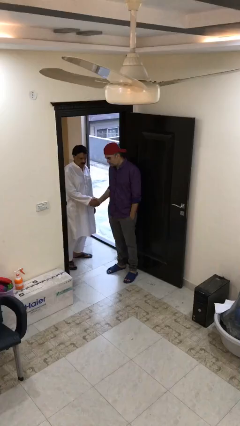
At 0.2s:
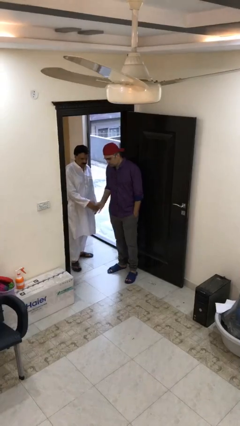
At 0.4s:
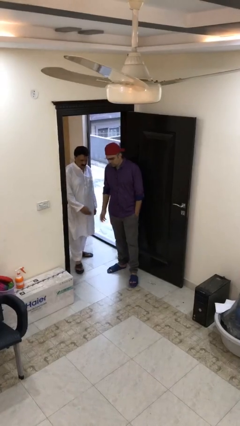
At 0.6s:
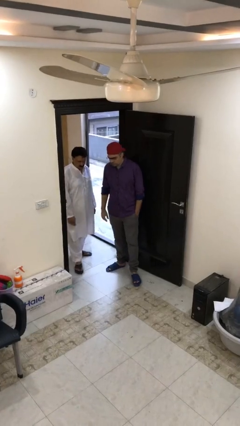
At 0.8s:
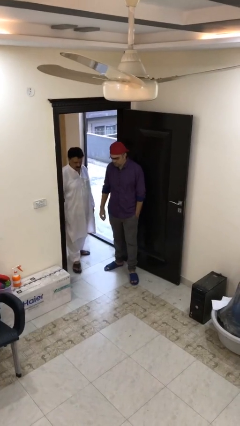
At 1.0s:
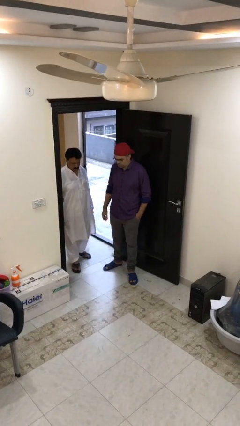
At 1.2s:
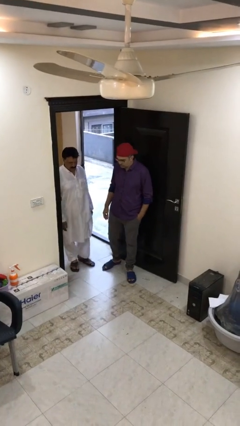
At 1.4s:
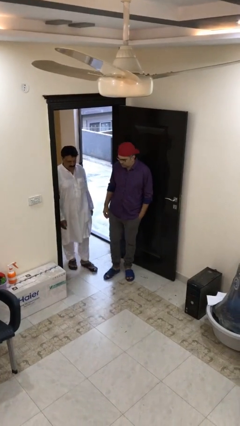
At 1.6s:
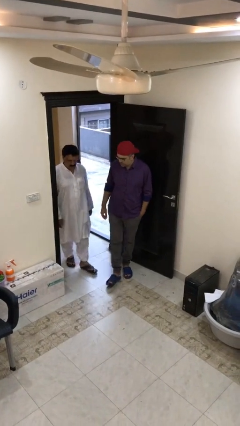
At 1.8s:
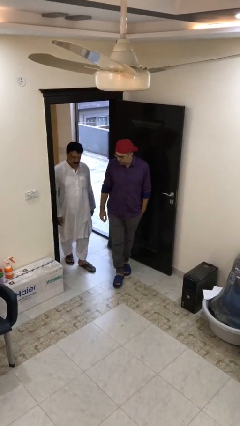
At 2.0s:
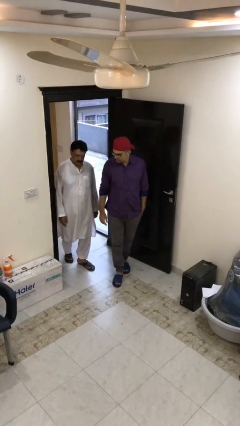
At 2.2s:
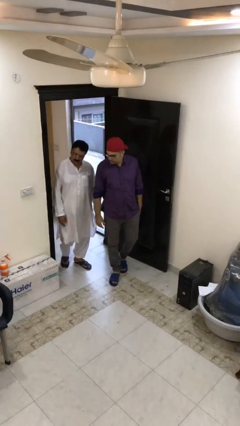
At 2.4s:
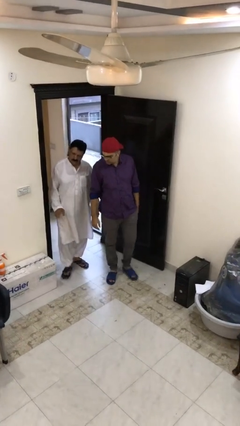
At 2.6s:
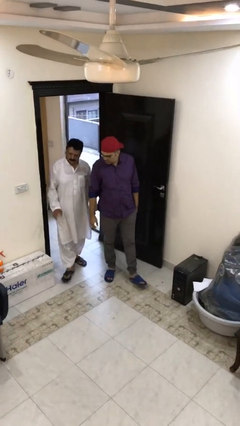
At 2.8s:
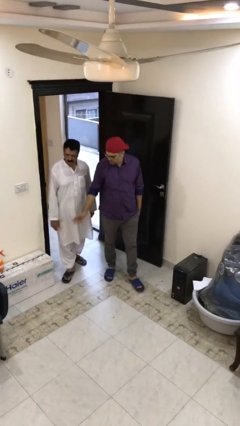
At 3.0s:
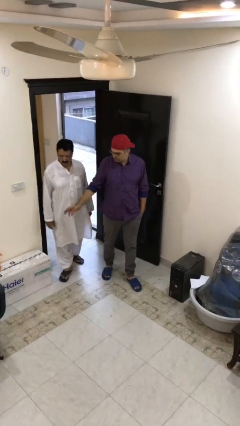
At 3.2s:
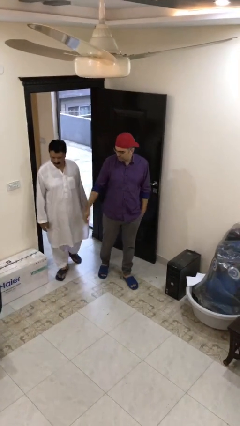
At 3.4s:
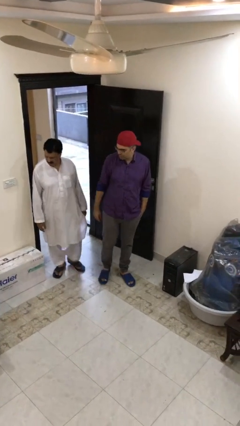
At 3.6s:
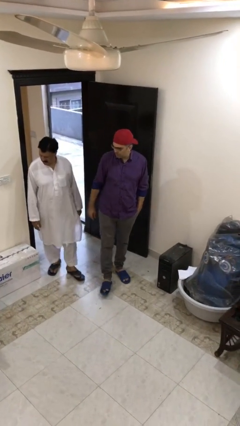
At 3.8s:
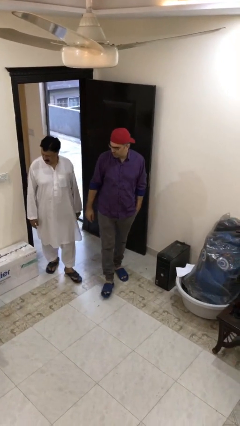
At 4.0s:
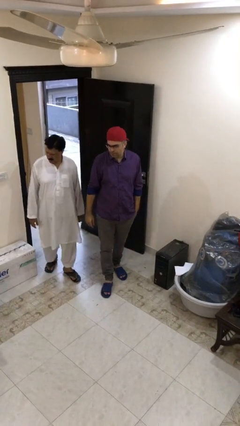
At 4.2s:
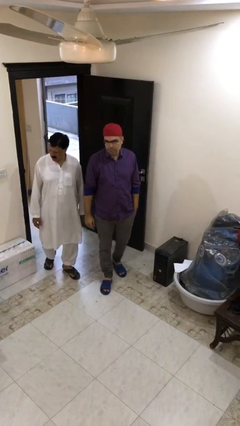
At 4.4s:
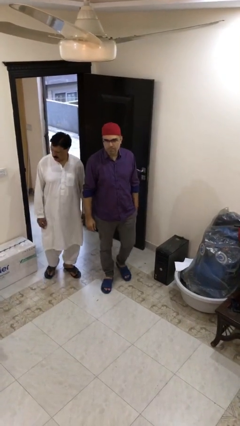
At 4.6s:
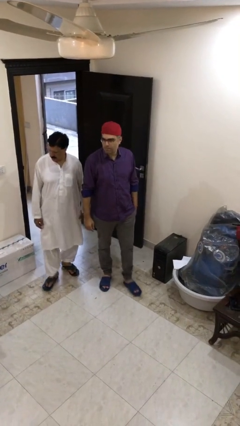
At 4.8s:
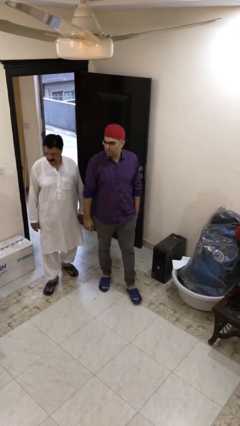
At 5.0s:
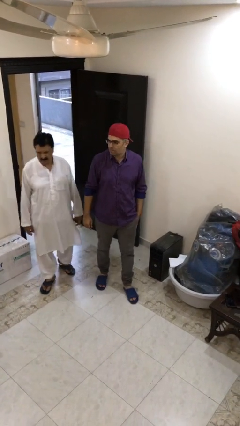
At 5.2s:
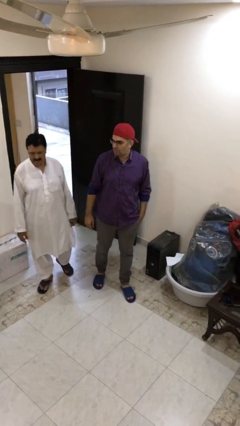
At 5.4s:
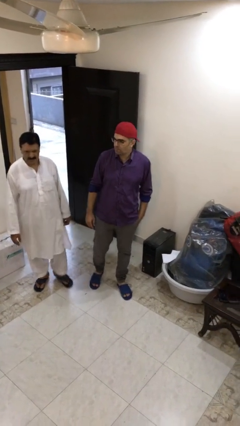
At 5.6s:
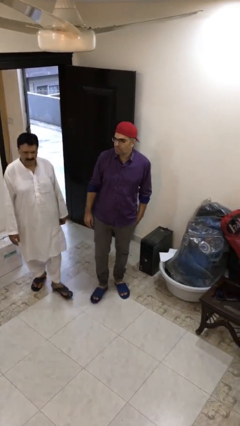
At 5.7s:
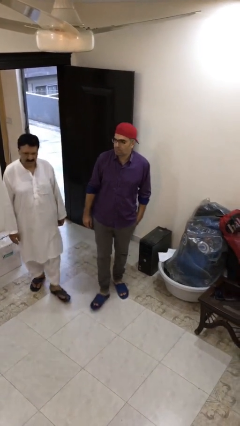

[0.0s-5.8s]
person talks to person

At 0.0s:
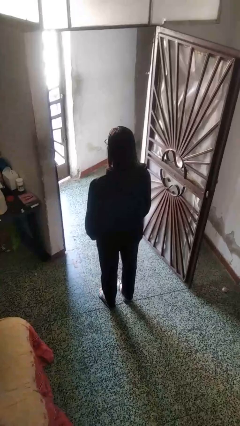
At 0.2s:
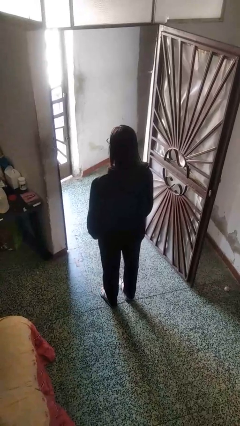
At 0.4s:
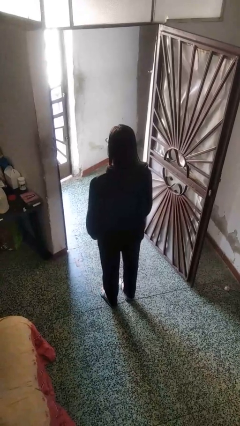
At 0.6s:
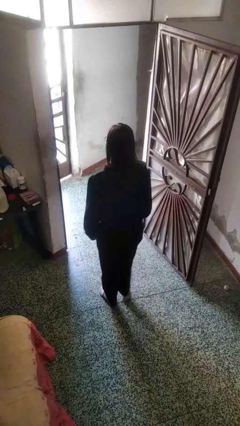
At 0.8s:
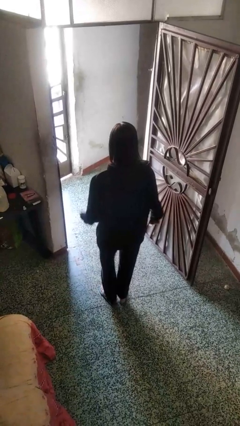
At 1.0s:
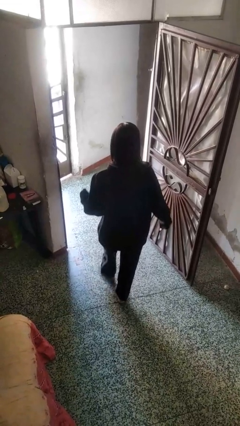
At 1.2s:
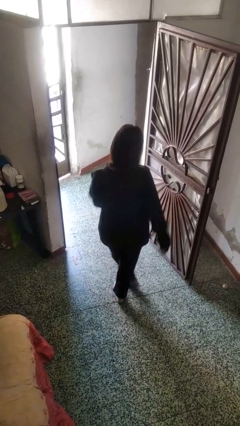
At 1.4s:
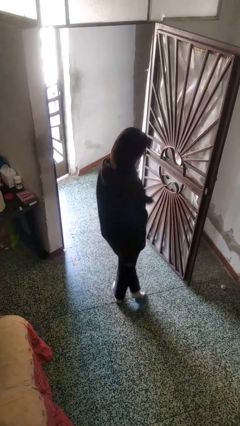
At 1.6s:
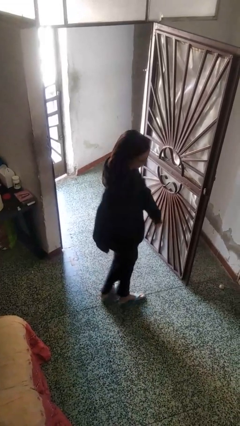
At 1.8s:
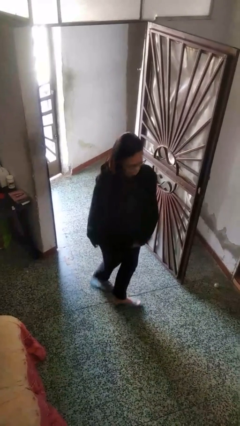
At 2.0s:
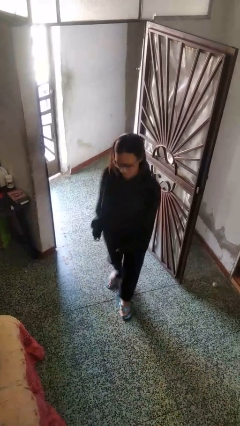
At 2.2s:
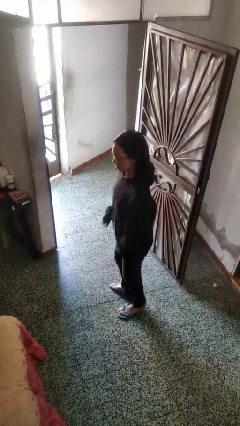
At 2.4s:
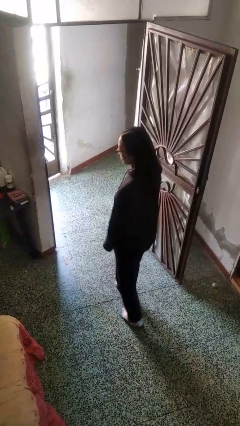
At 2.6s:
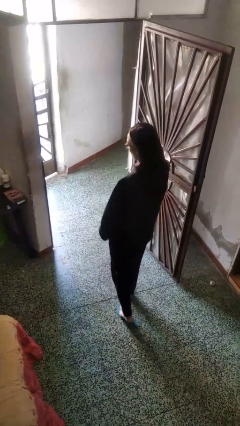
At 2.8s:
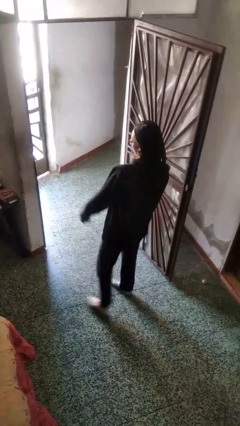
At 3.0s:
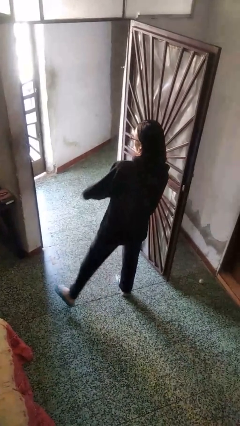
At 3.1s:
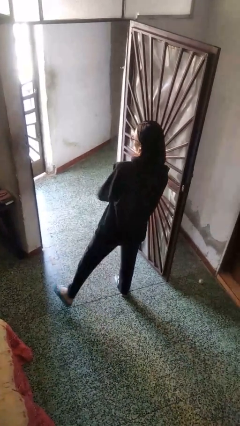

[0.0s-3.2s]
person twirls

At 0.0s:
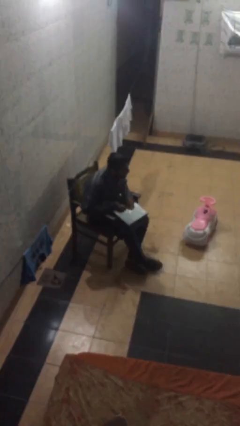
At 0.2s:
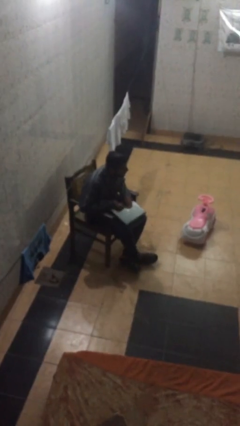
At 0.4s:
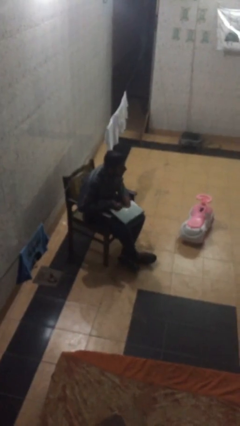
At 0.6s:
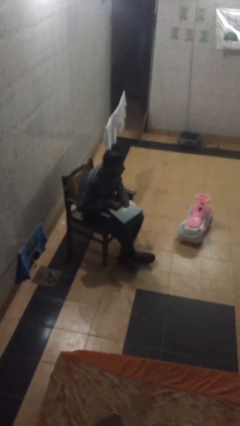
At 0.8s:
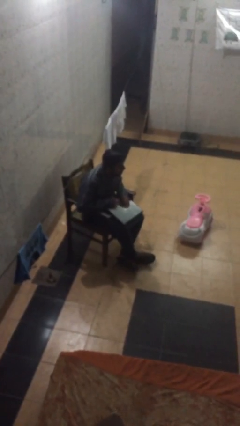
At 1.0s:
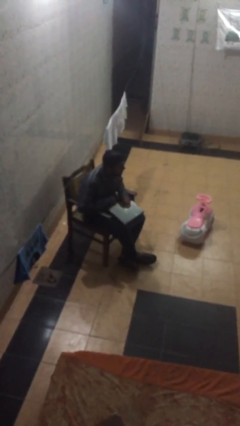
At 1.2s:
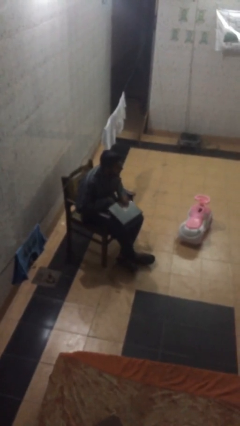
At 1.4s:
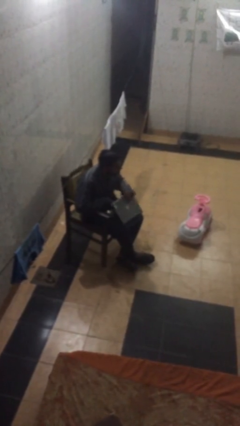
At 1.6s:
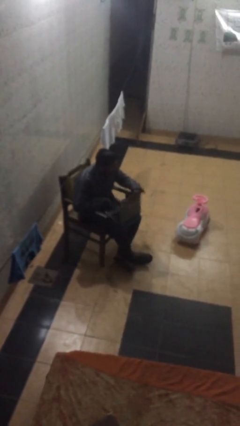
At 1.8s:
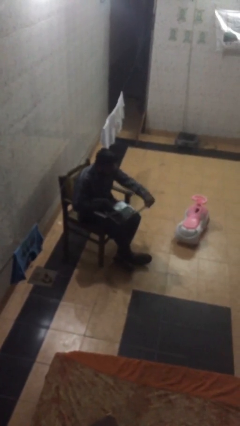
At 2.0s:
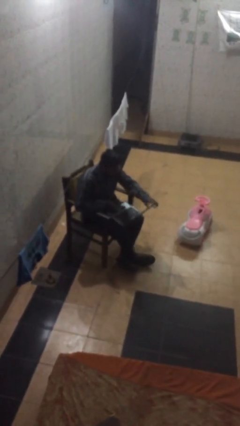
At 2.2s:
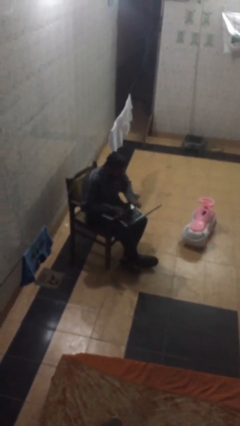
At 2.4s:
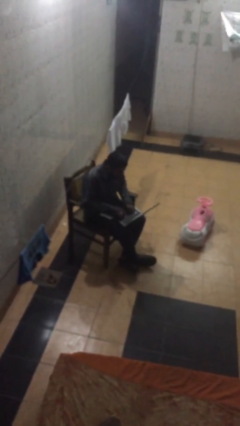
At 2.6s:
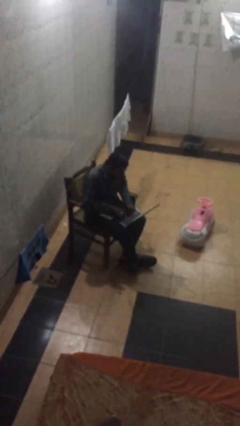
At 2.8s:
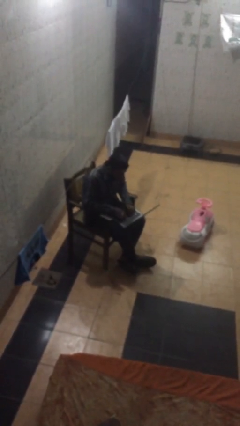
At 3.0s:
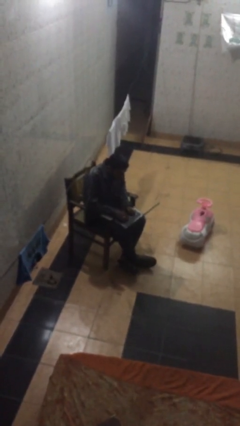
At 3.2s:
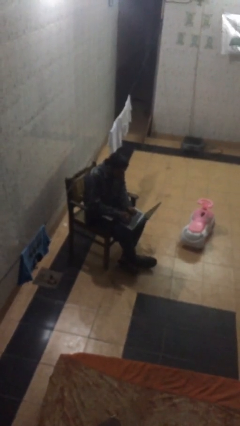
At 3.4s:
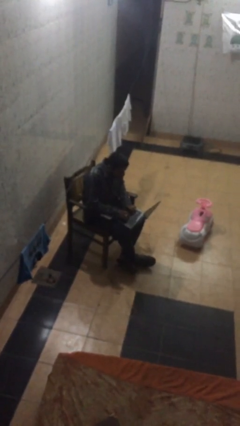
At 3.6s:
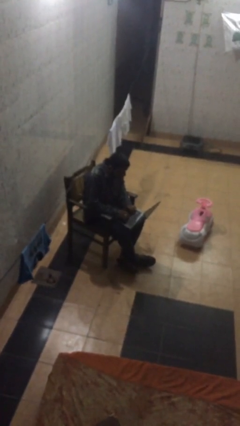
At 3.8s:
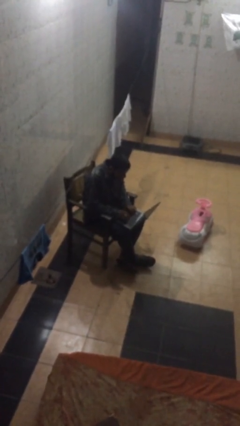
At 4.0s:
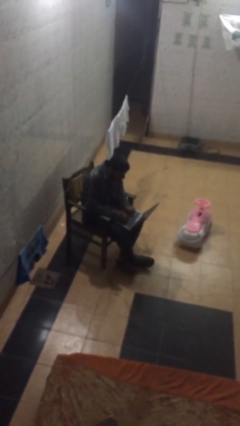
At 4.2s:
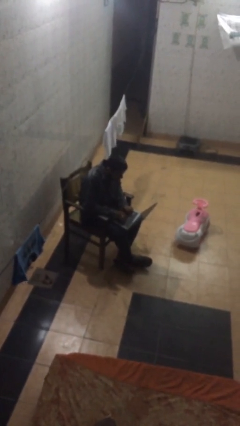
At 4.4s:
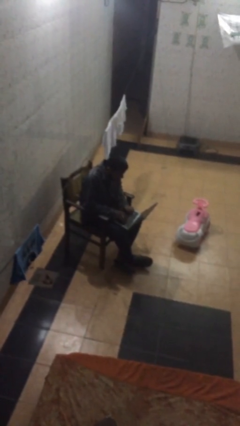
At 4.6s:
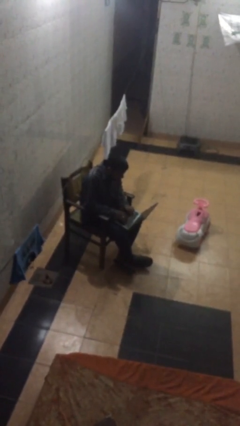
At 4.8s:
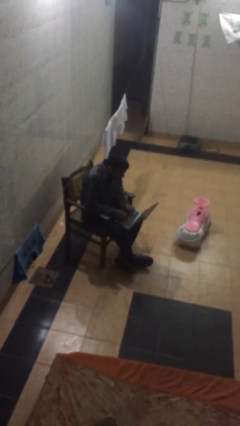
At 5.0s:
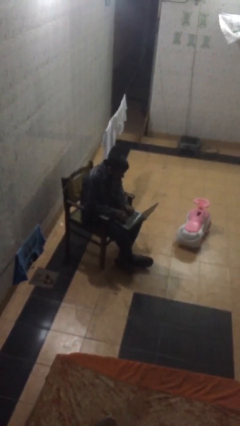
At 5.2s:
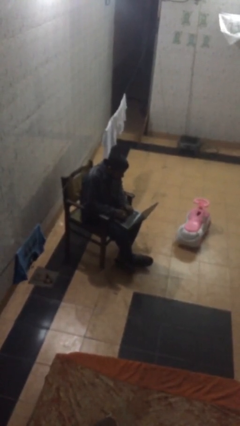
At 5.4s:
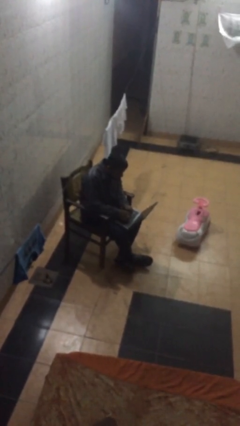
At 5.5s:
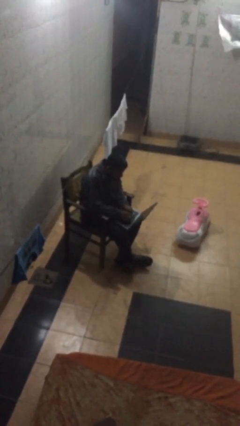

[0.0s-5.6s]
person interacts with laptop

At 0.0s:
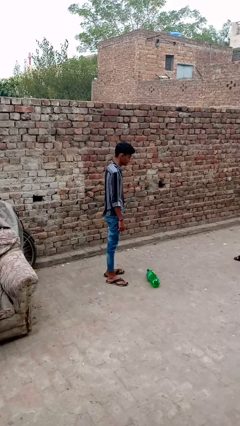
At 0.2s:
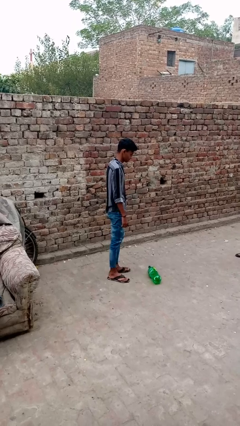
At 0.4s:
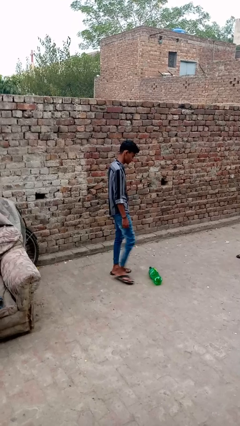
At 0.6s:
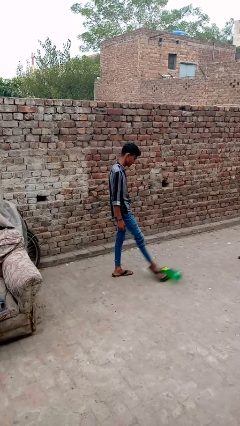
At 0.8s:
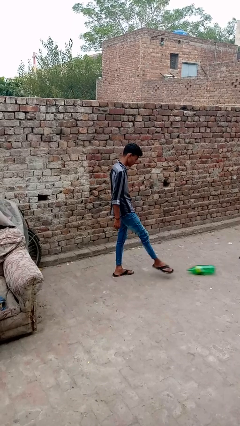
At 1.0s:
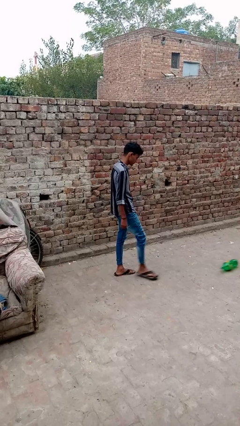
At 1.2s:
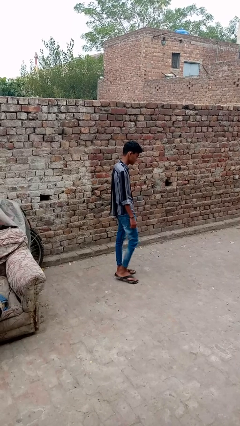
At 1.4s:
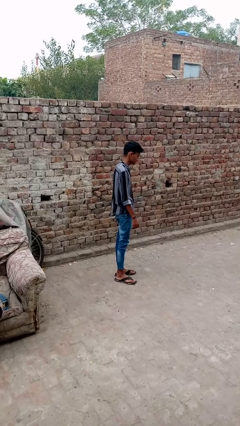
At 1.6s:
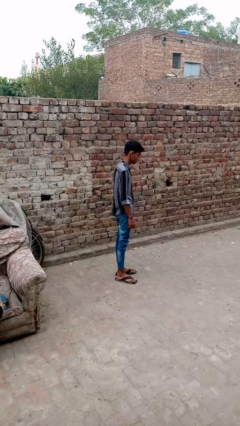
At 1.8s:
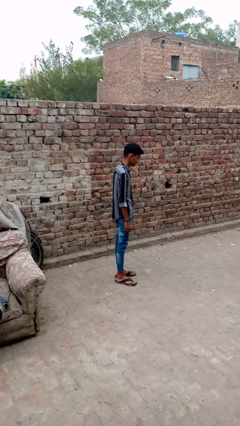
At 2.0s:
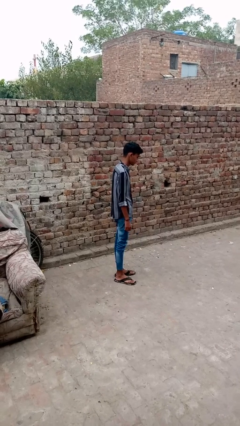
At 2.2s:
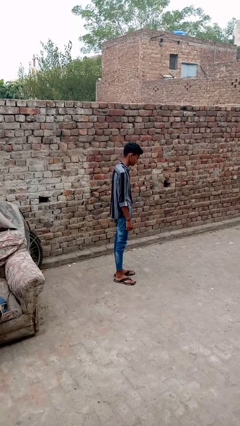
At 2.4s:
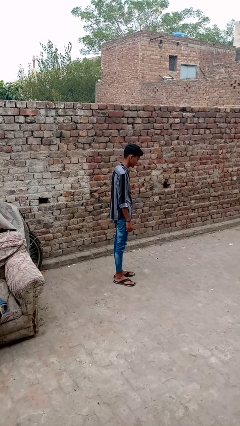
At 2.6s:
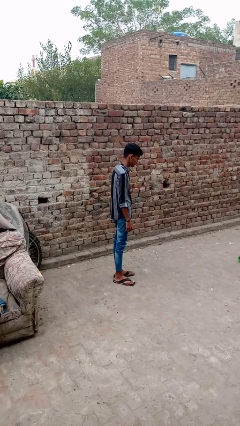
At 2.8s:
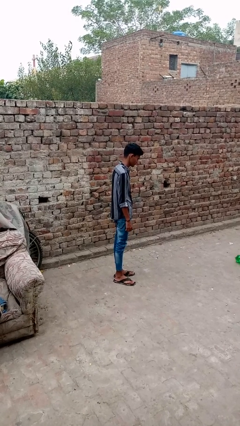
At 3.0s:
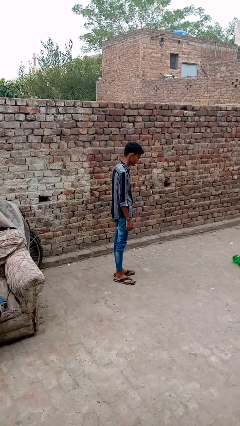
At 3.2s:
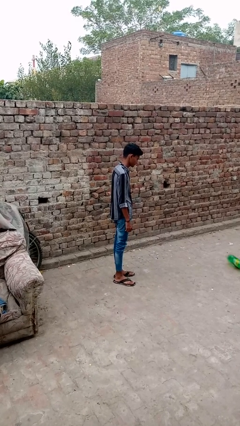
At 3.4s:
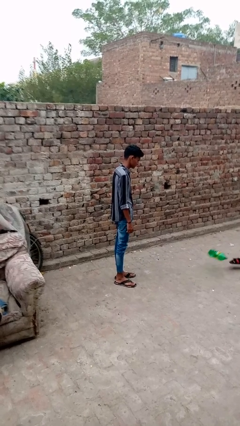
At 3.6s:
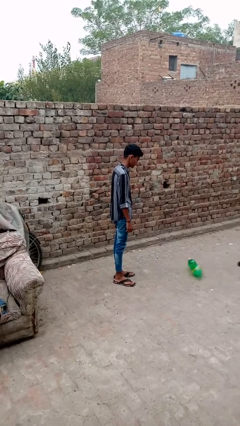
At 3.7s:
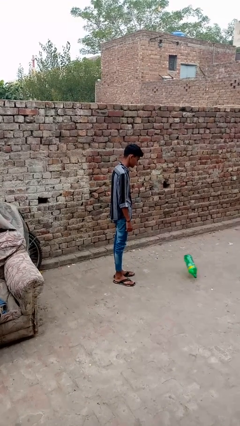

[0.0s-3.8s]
person kicks object to person
